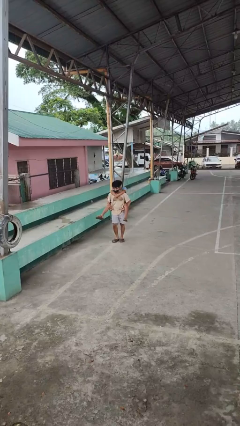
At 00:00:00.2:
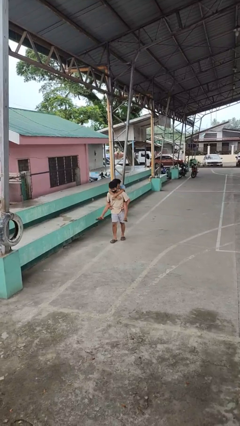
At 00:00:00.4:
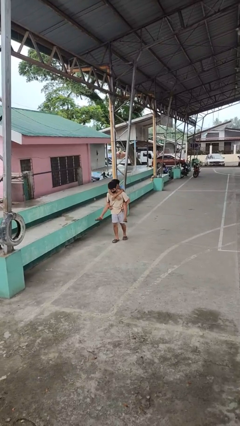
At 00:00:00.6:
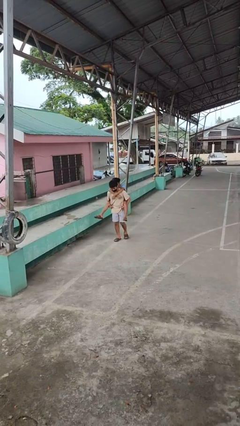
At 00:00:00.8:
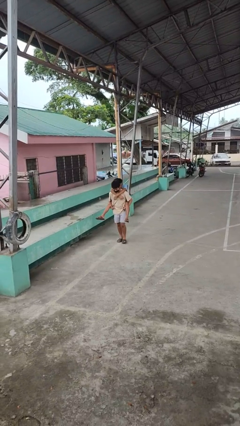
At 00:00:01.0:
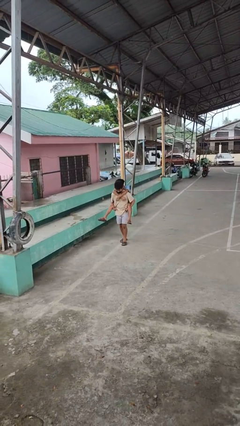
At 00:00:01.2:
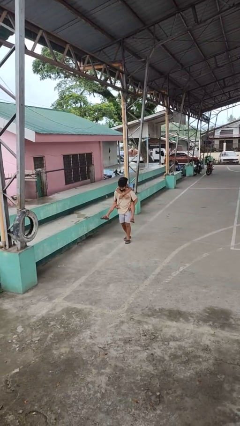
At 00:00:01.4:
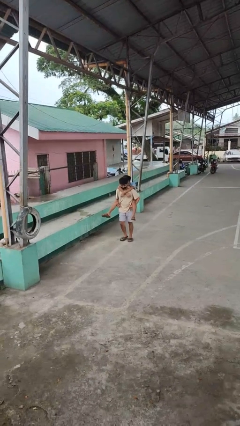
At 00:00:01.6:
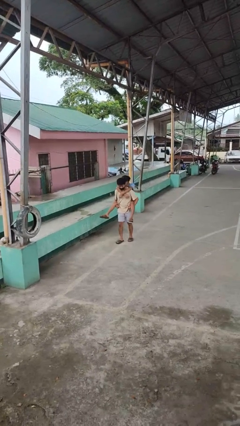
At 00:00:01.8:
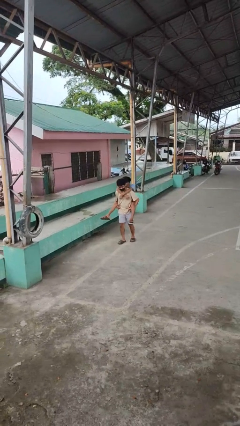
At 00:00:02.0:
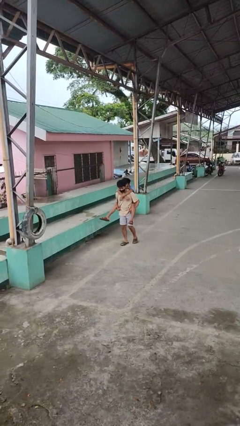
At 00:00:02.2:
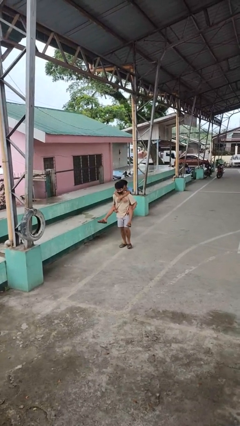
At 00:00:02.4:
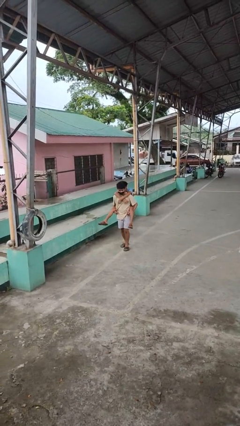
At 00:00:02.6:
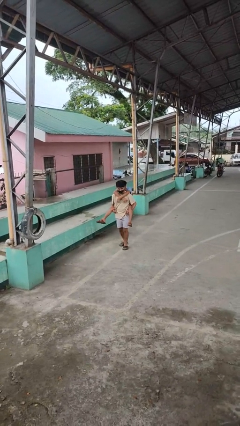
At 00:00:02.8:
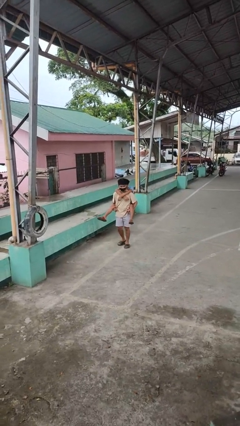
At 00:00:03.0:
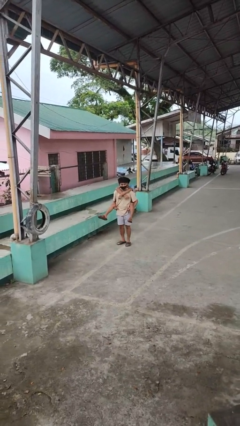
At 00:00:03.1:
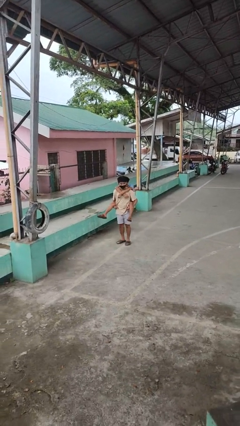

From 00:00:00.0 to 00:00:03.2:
person carries person on back

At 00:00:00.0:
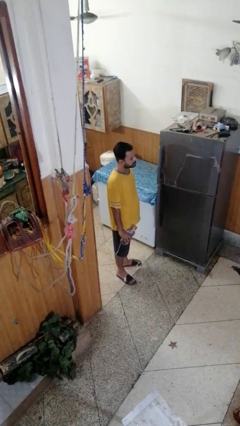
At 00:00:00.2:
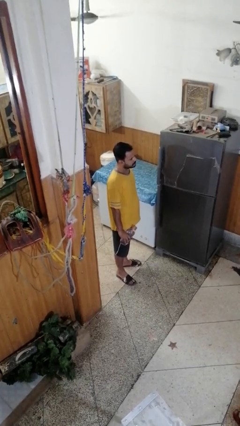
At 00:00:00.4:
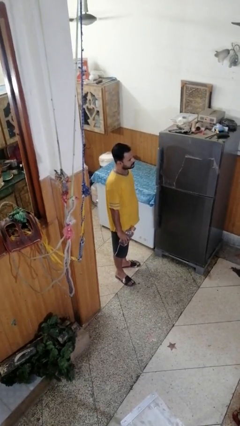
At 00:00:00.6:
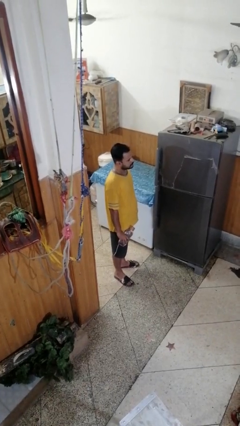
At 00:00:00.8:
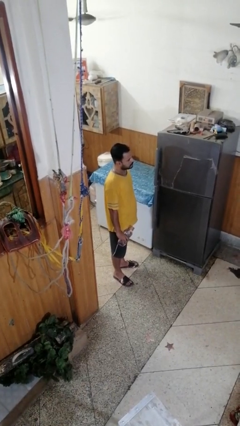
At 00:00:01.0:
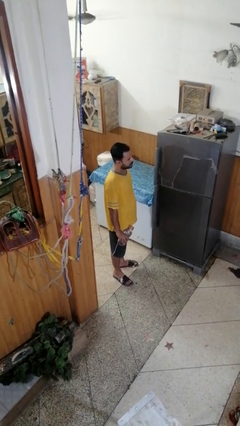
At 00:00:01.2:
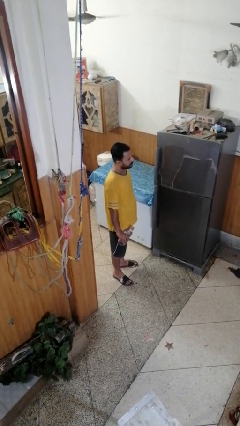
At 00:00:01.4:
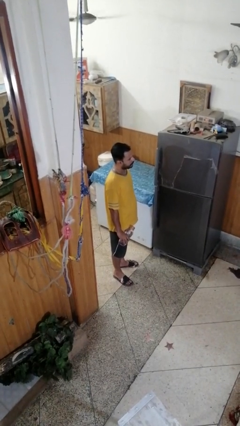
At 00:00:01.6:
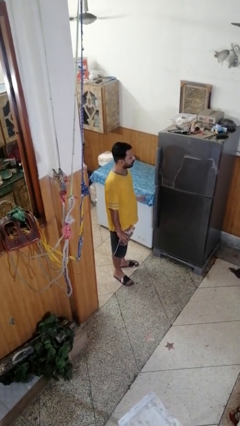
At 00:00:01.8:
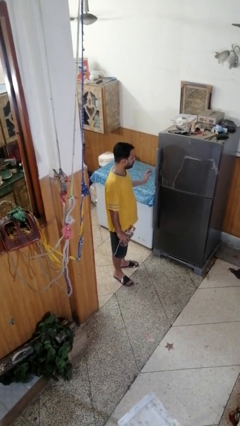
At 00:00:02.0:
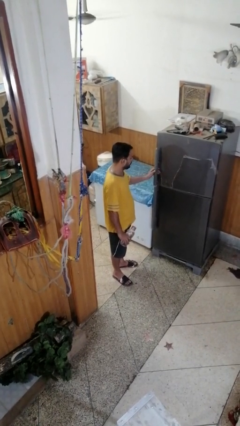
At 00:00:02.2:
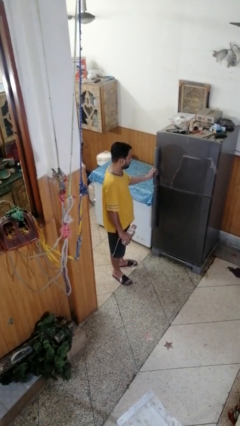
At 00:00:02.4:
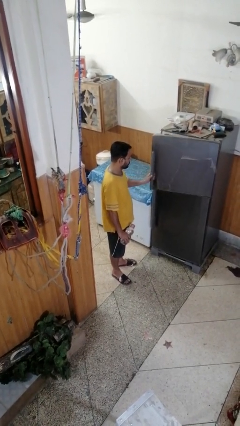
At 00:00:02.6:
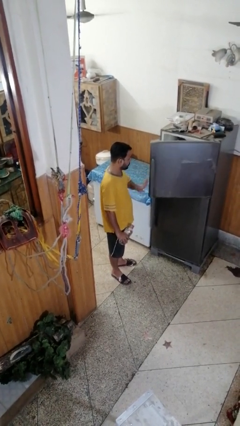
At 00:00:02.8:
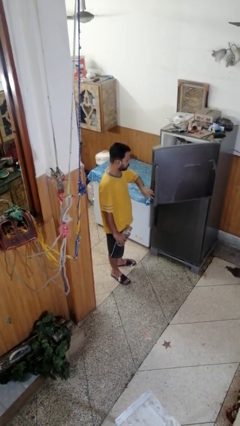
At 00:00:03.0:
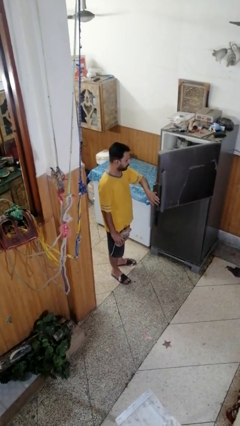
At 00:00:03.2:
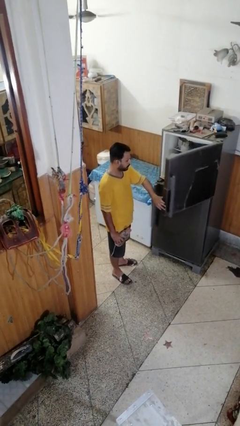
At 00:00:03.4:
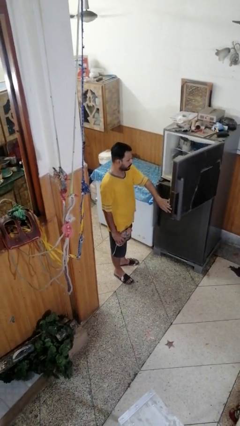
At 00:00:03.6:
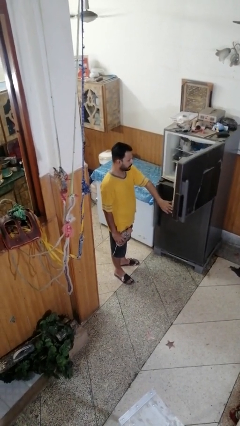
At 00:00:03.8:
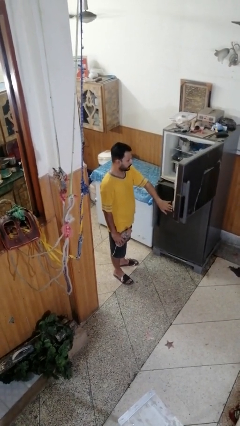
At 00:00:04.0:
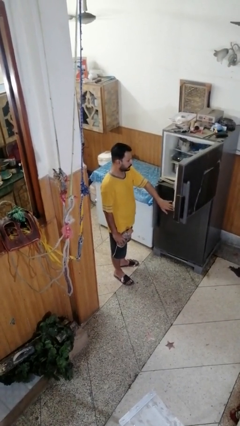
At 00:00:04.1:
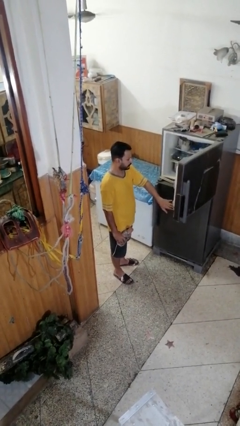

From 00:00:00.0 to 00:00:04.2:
person opens refrigerator

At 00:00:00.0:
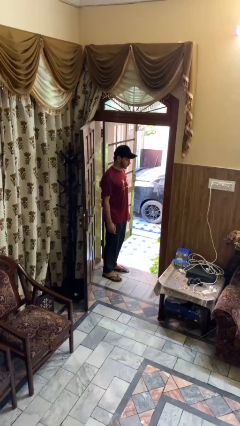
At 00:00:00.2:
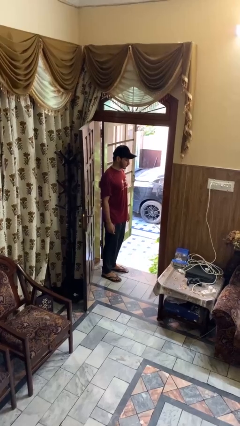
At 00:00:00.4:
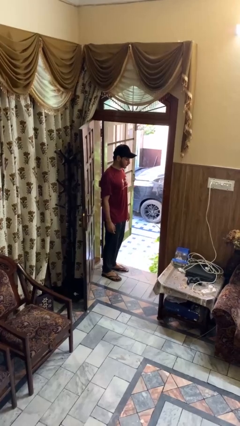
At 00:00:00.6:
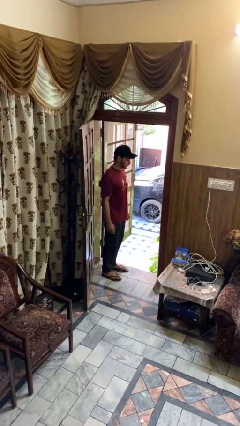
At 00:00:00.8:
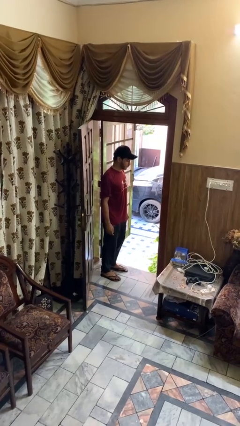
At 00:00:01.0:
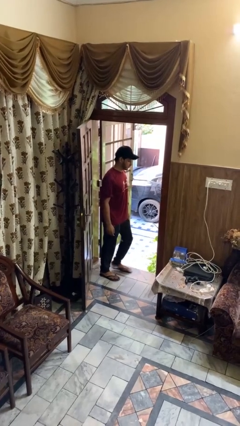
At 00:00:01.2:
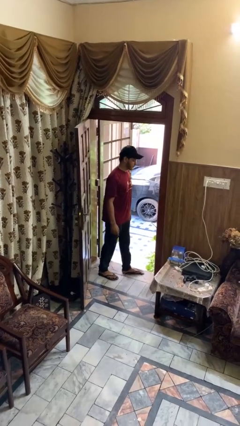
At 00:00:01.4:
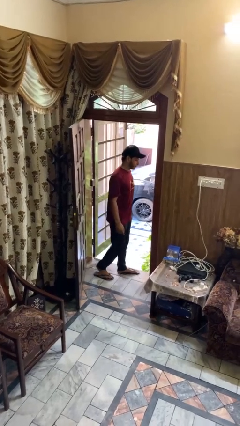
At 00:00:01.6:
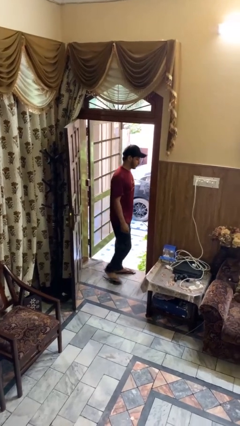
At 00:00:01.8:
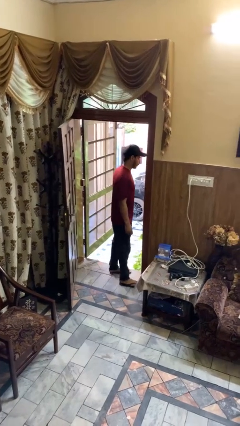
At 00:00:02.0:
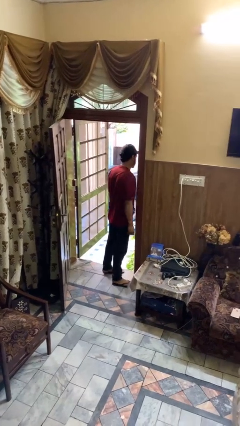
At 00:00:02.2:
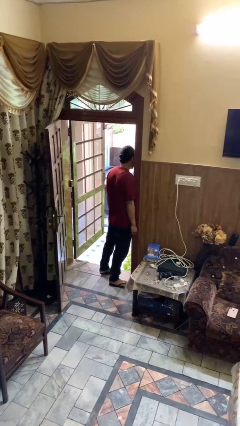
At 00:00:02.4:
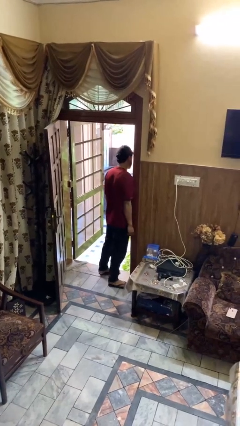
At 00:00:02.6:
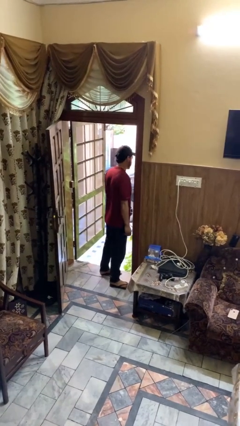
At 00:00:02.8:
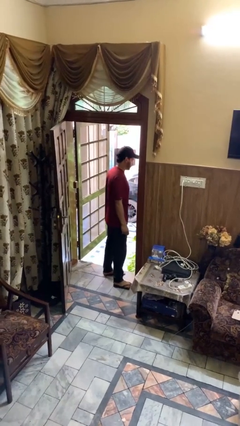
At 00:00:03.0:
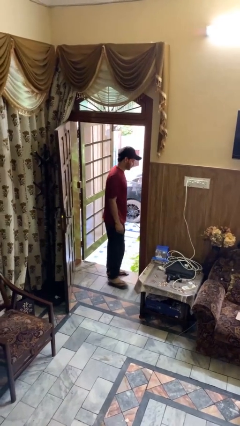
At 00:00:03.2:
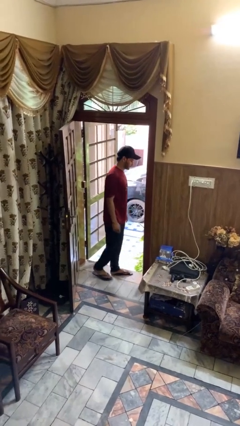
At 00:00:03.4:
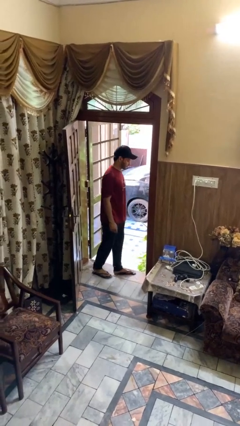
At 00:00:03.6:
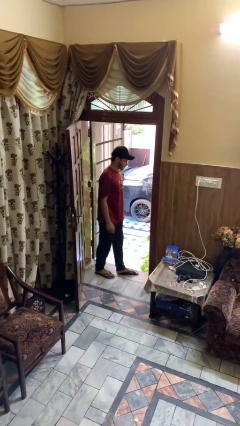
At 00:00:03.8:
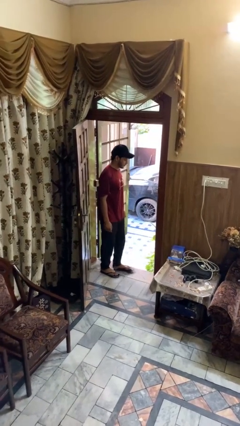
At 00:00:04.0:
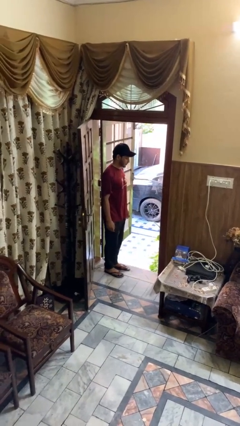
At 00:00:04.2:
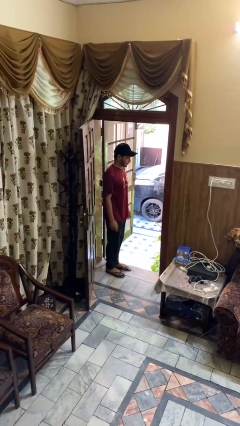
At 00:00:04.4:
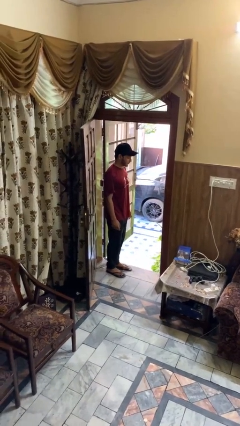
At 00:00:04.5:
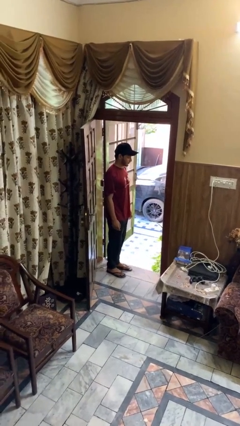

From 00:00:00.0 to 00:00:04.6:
person bumps into wall

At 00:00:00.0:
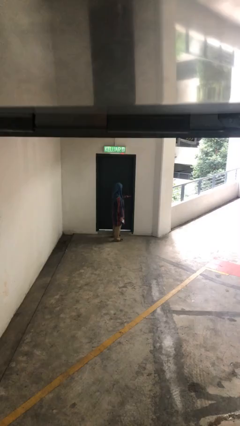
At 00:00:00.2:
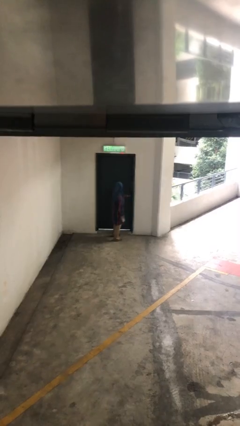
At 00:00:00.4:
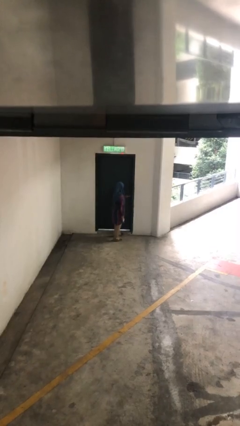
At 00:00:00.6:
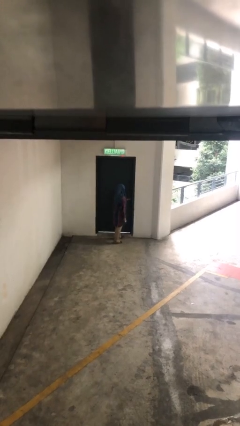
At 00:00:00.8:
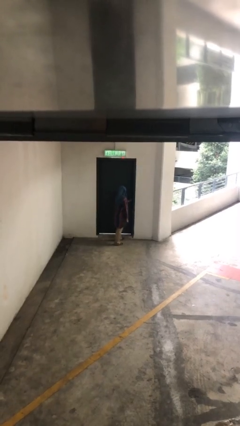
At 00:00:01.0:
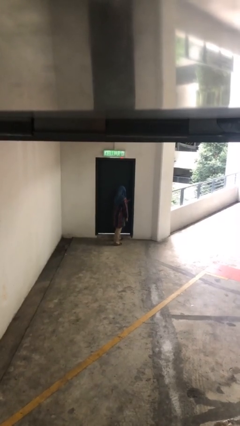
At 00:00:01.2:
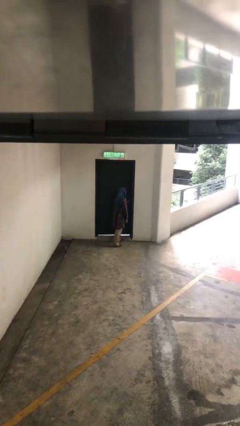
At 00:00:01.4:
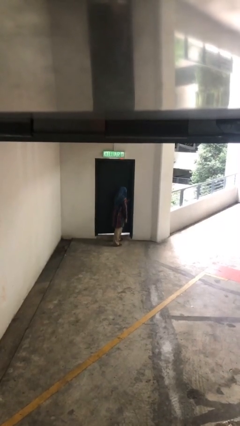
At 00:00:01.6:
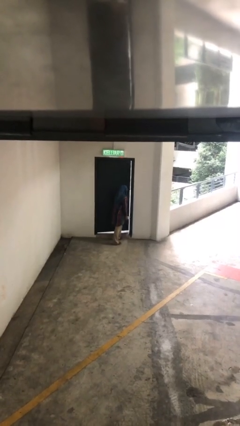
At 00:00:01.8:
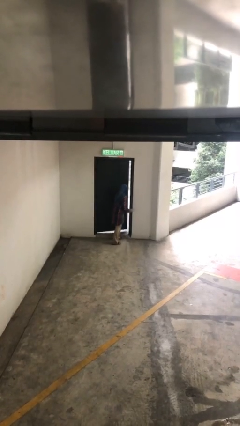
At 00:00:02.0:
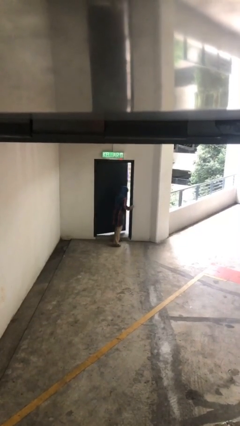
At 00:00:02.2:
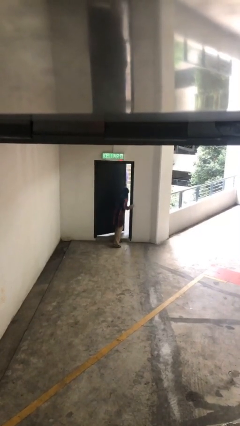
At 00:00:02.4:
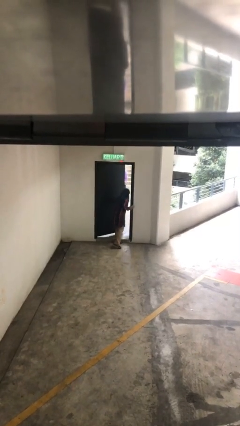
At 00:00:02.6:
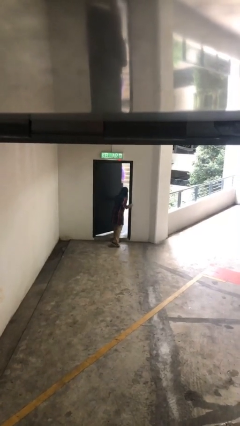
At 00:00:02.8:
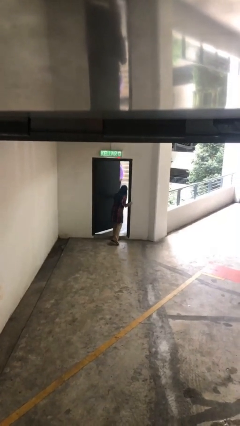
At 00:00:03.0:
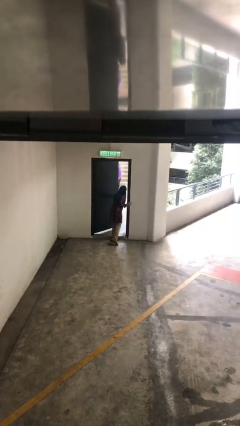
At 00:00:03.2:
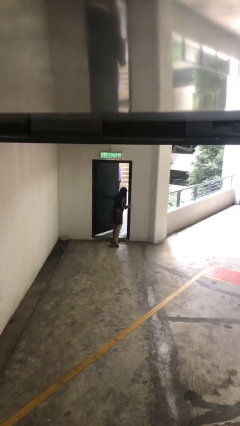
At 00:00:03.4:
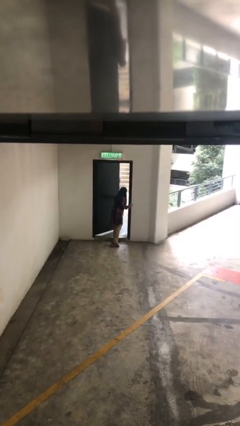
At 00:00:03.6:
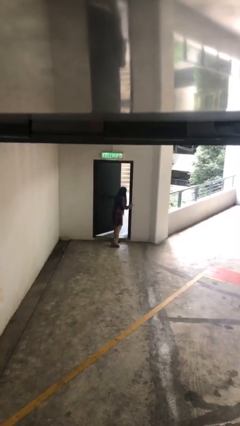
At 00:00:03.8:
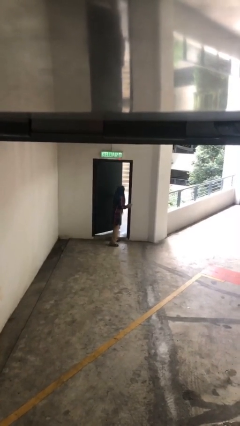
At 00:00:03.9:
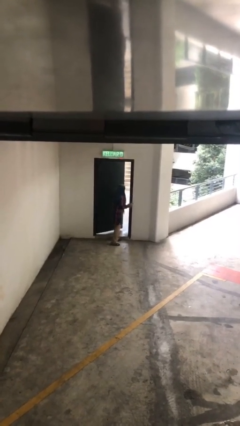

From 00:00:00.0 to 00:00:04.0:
person opens facility door

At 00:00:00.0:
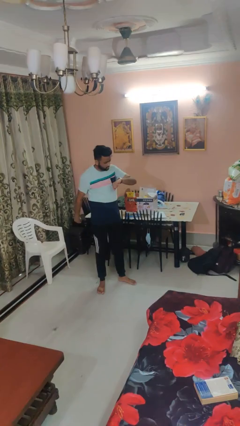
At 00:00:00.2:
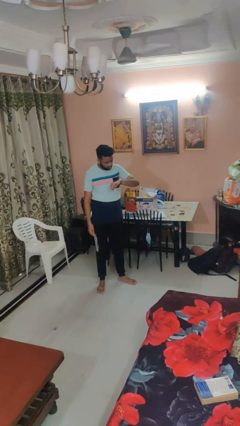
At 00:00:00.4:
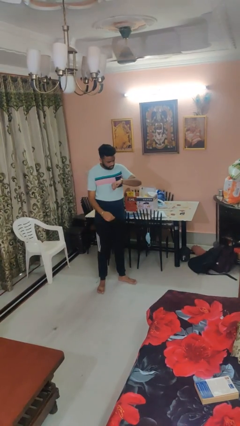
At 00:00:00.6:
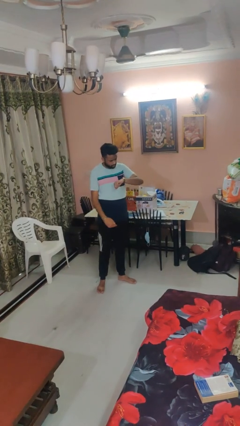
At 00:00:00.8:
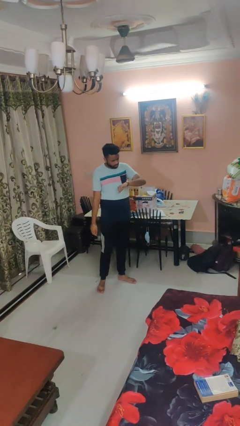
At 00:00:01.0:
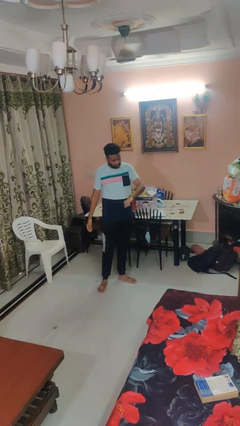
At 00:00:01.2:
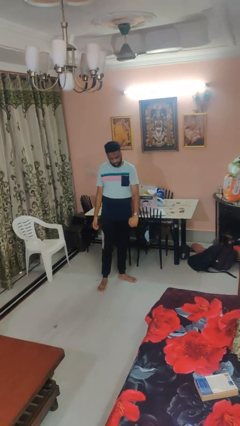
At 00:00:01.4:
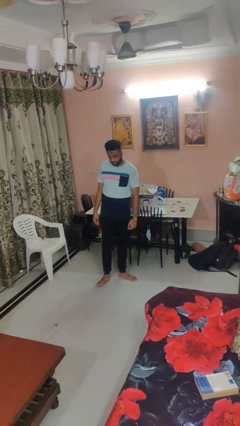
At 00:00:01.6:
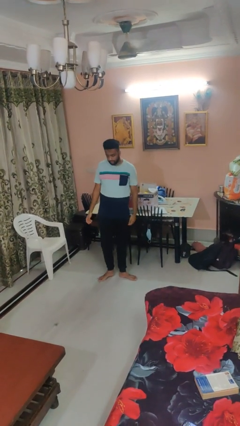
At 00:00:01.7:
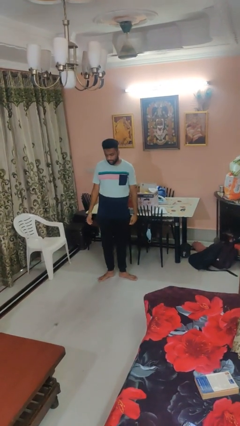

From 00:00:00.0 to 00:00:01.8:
person looks at wristwatch
